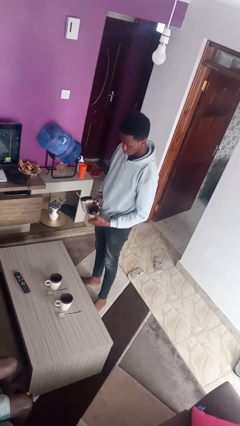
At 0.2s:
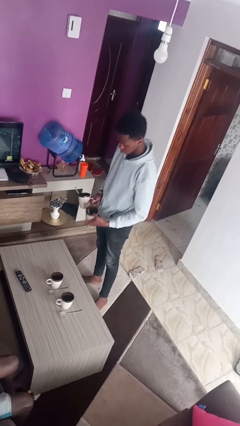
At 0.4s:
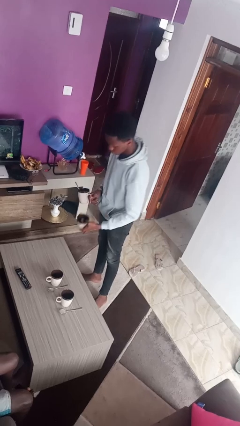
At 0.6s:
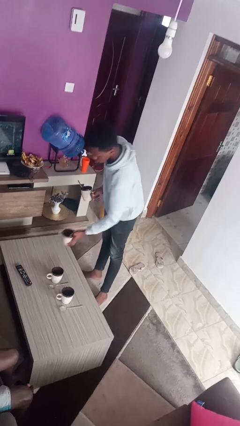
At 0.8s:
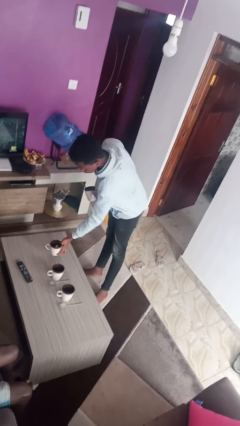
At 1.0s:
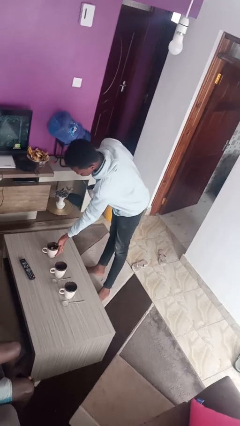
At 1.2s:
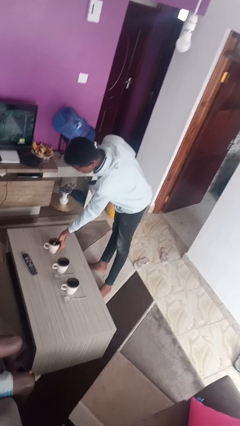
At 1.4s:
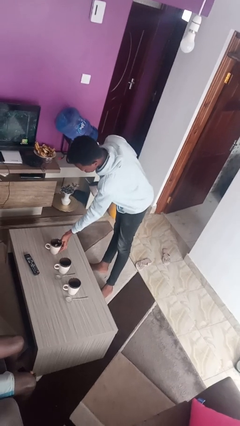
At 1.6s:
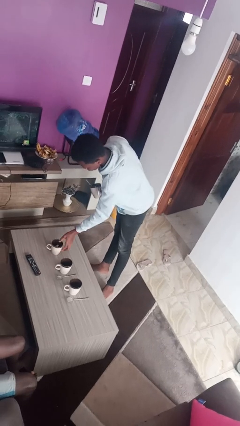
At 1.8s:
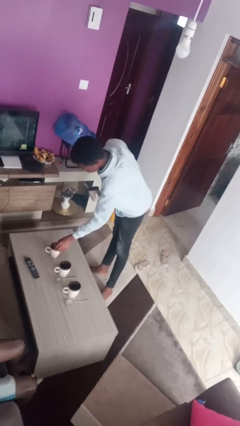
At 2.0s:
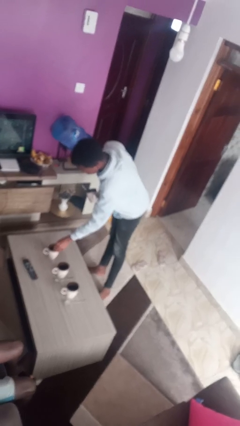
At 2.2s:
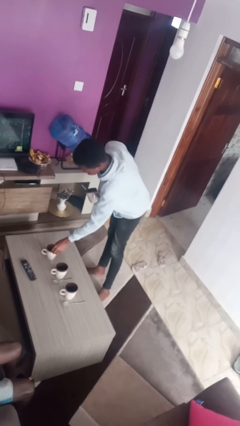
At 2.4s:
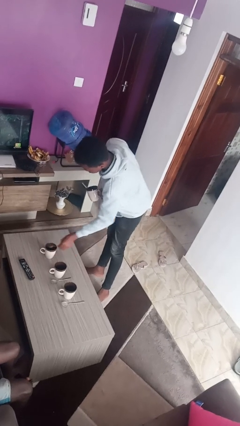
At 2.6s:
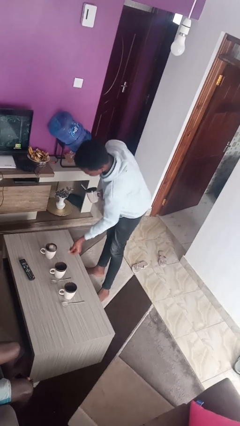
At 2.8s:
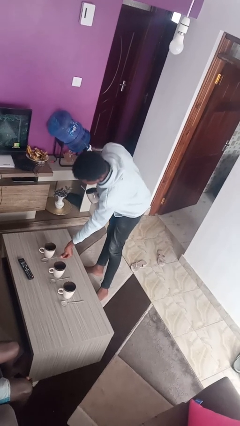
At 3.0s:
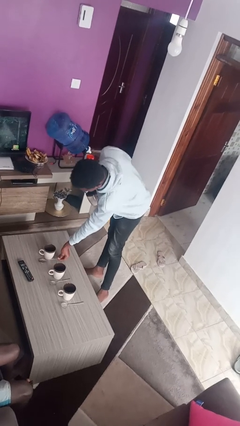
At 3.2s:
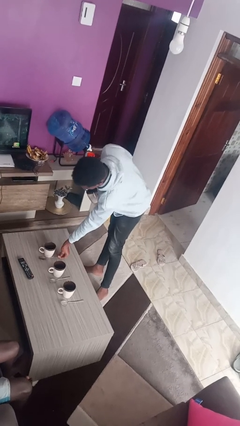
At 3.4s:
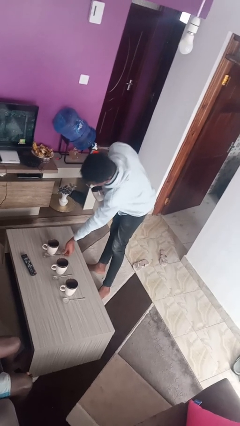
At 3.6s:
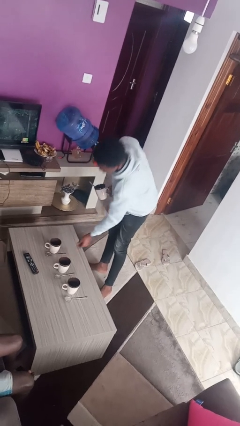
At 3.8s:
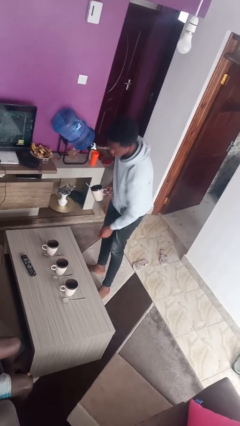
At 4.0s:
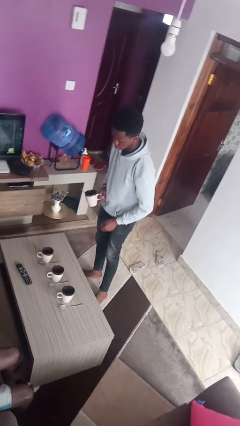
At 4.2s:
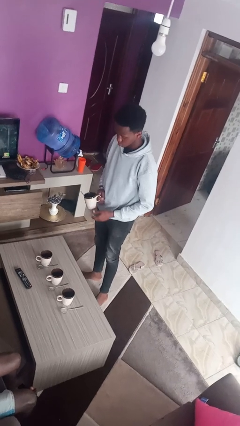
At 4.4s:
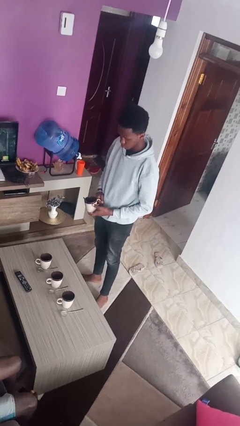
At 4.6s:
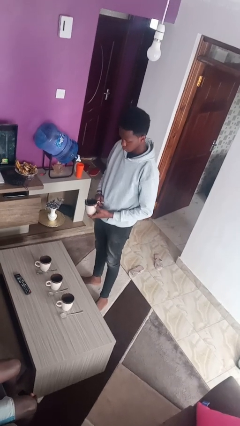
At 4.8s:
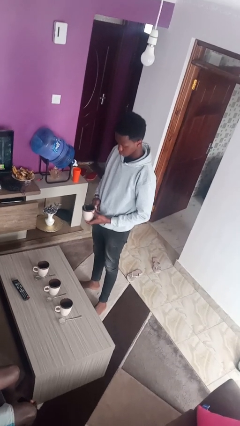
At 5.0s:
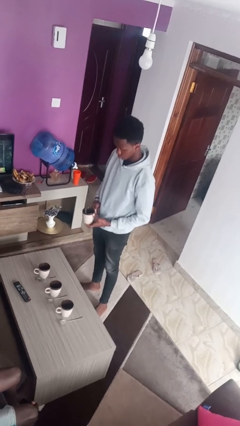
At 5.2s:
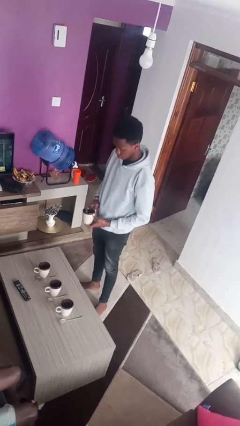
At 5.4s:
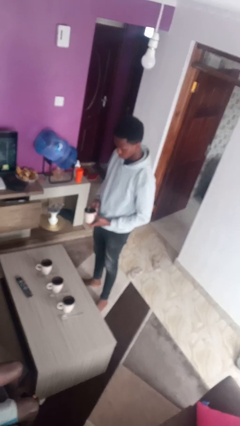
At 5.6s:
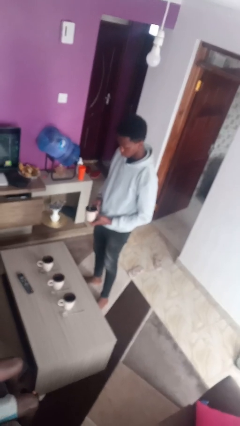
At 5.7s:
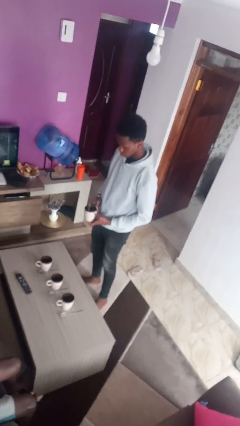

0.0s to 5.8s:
person sets table

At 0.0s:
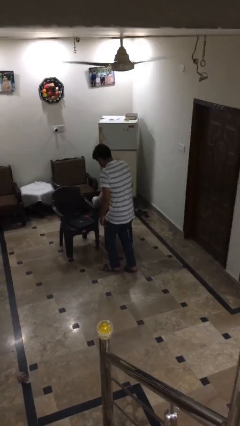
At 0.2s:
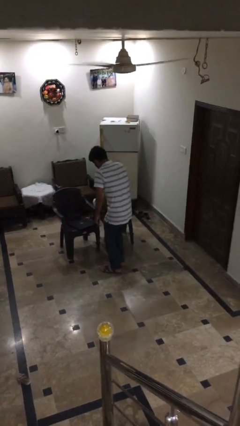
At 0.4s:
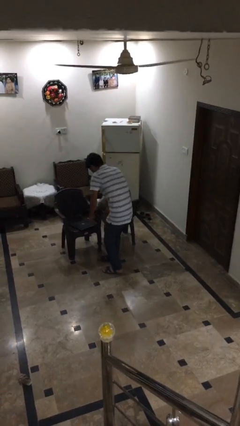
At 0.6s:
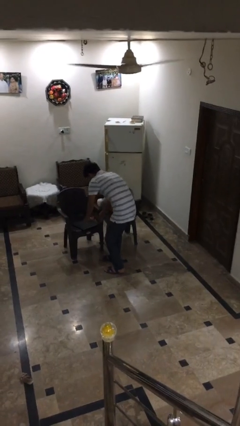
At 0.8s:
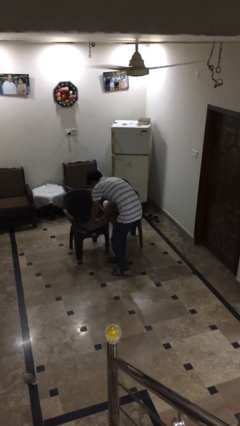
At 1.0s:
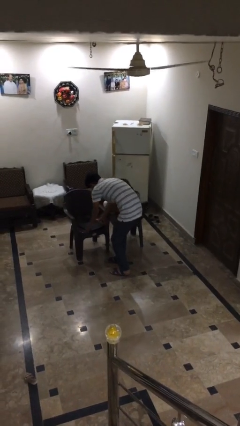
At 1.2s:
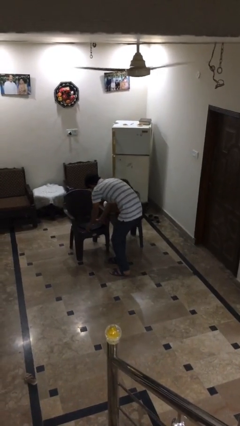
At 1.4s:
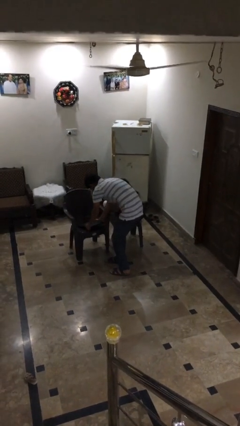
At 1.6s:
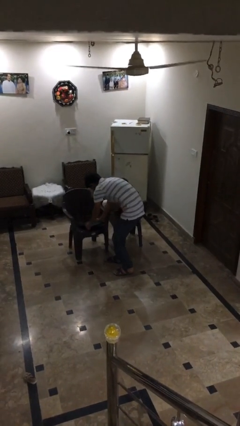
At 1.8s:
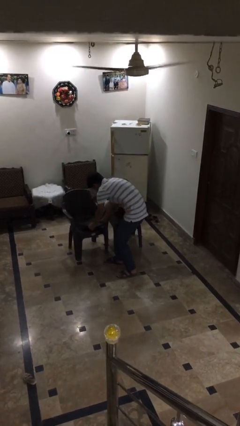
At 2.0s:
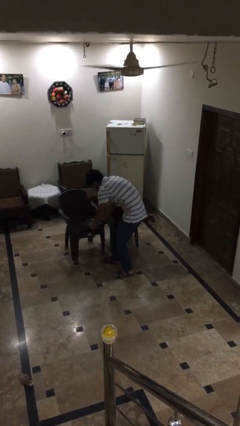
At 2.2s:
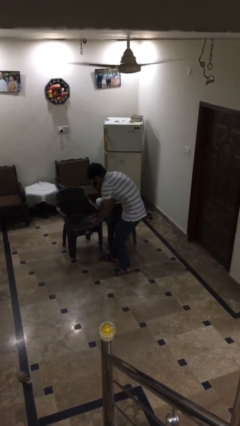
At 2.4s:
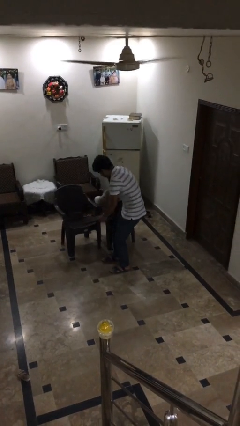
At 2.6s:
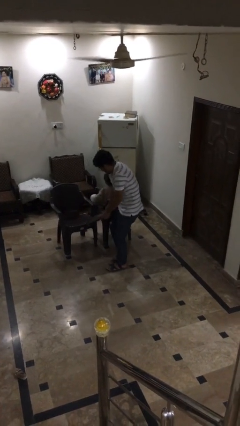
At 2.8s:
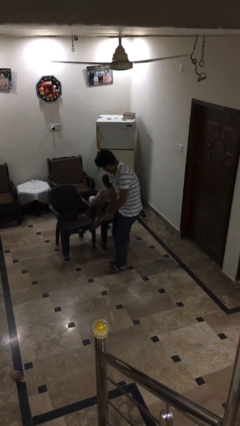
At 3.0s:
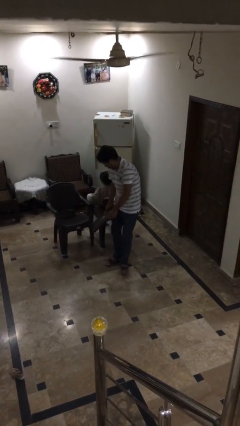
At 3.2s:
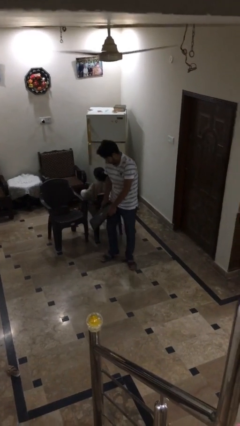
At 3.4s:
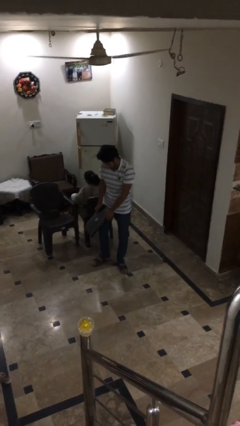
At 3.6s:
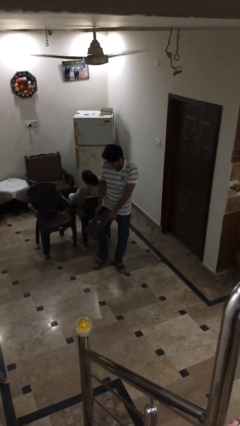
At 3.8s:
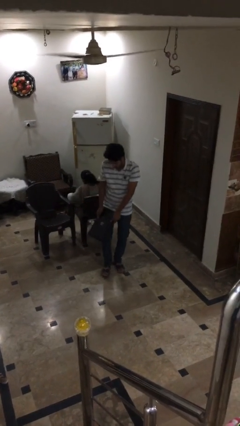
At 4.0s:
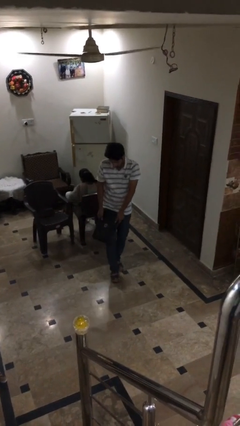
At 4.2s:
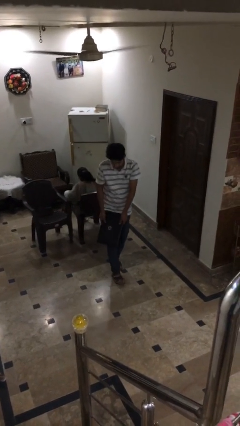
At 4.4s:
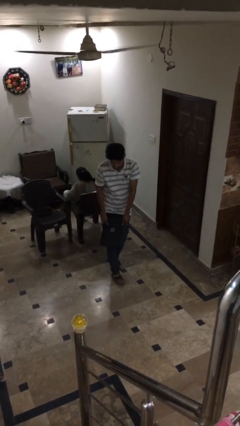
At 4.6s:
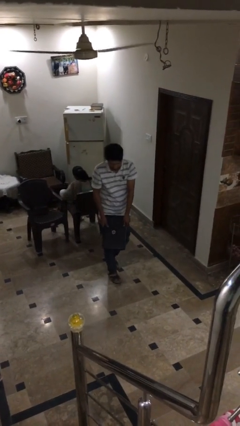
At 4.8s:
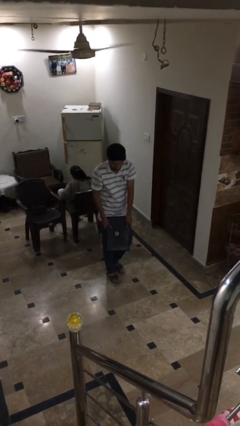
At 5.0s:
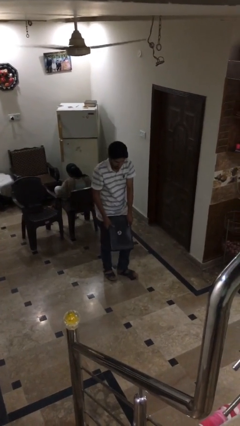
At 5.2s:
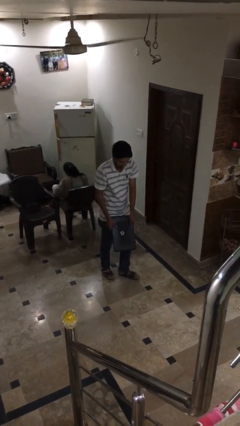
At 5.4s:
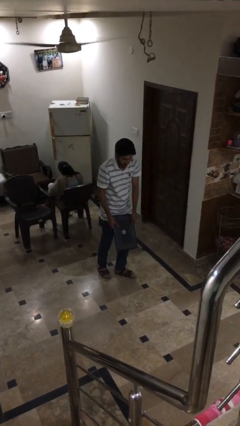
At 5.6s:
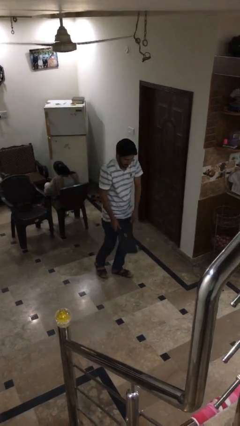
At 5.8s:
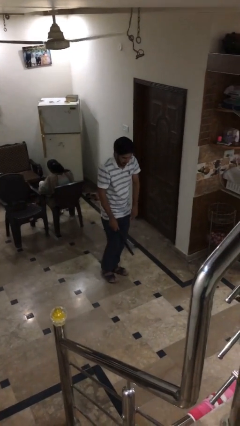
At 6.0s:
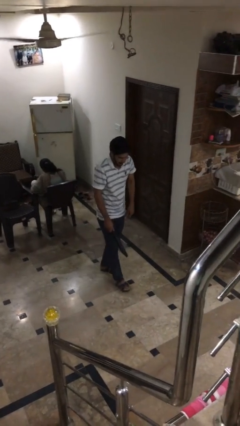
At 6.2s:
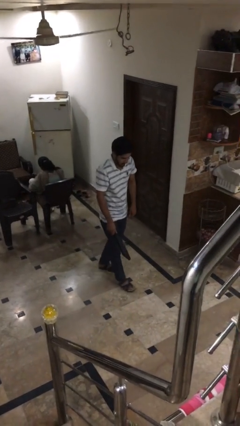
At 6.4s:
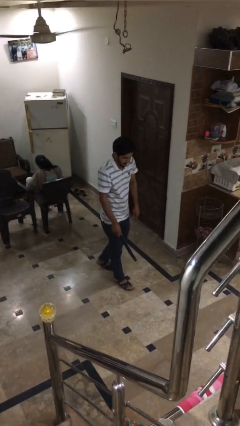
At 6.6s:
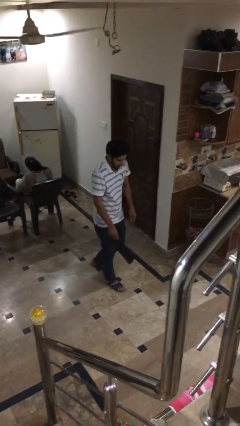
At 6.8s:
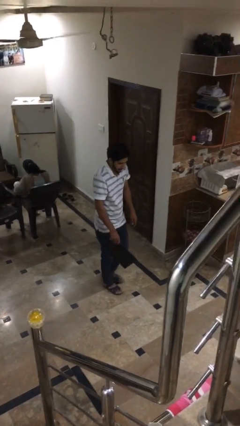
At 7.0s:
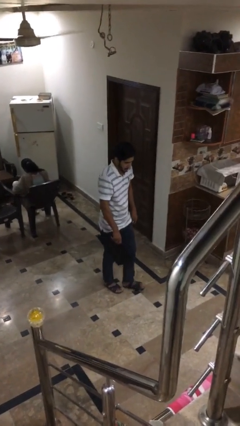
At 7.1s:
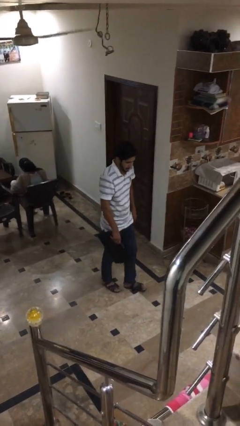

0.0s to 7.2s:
person steals object from person

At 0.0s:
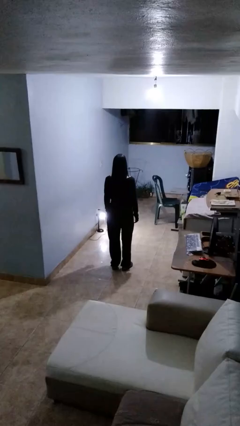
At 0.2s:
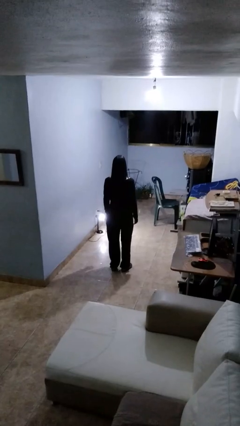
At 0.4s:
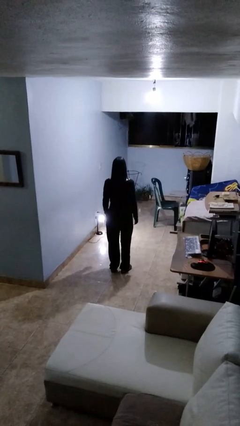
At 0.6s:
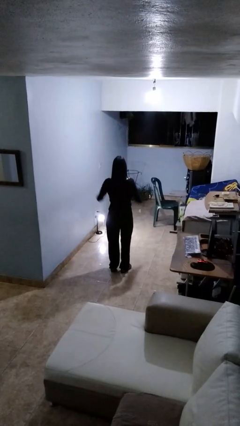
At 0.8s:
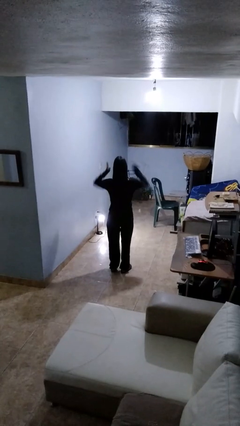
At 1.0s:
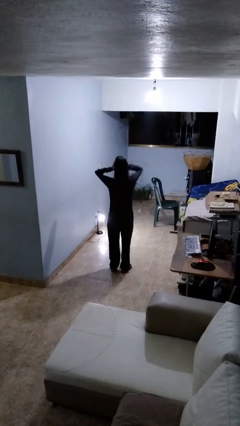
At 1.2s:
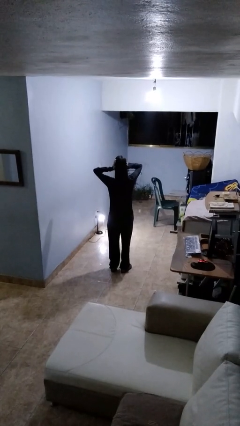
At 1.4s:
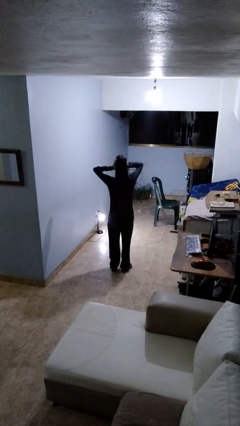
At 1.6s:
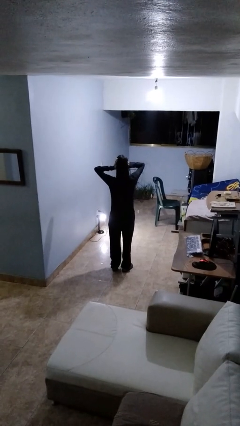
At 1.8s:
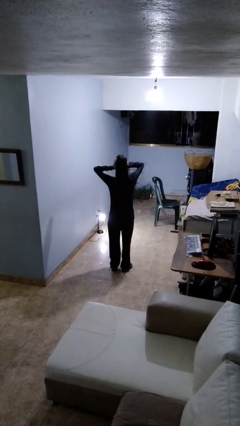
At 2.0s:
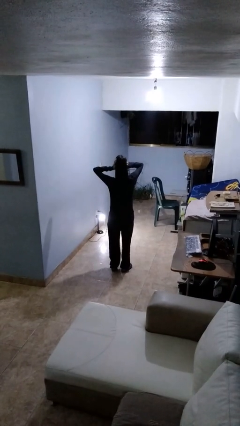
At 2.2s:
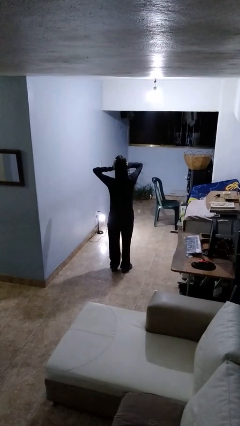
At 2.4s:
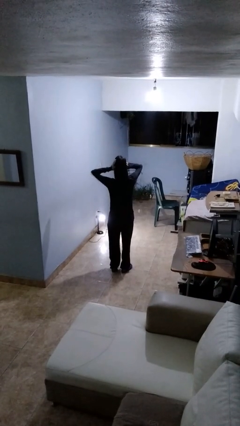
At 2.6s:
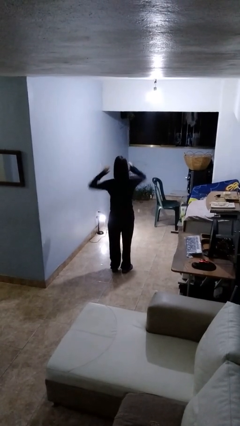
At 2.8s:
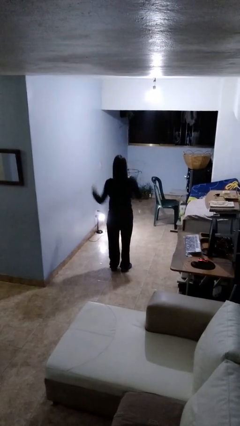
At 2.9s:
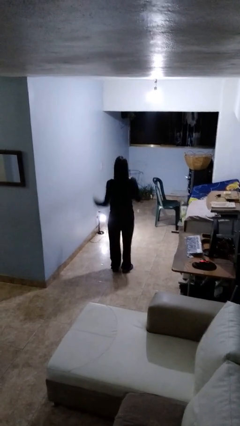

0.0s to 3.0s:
person puts fingers in ear

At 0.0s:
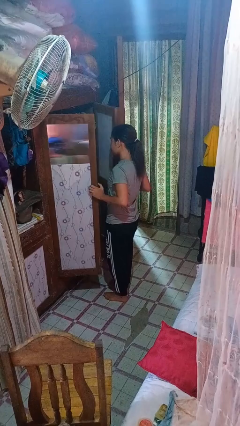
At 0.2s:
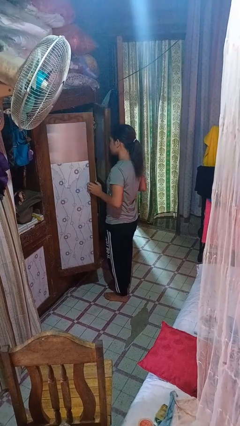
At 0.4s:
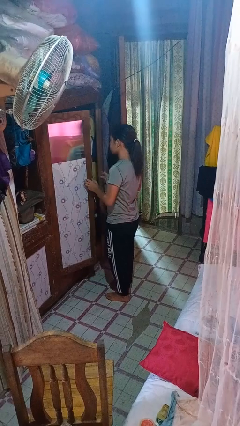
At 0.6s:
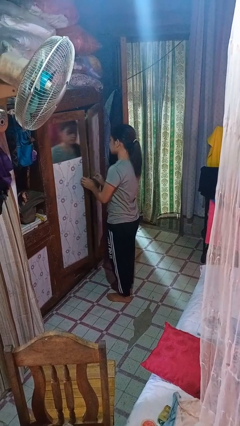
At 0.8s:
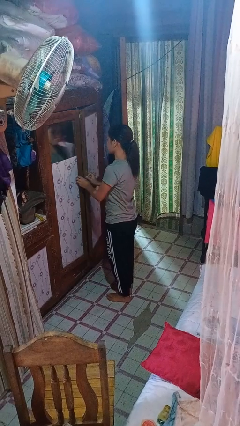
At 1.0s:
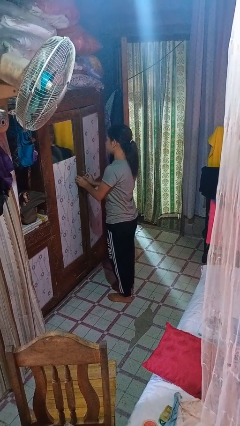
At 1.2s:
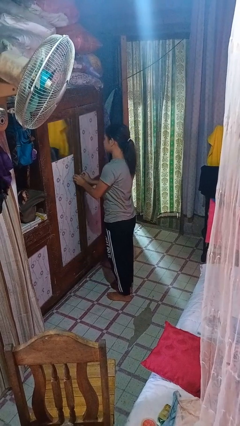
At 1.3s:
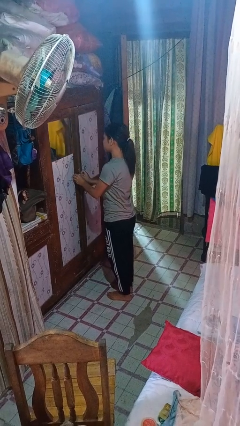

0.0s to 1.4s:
person closes closet door
